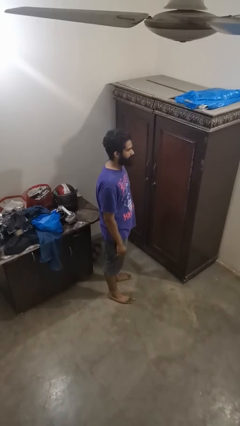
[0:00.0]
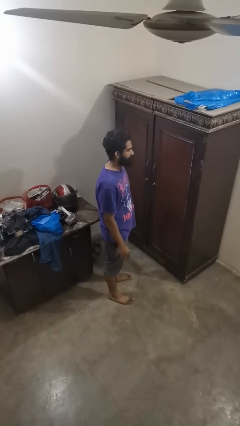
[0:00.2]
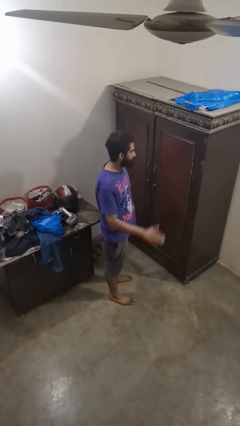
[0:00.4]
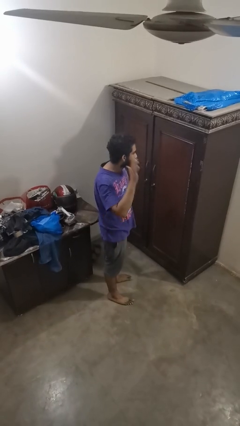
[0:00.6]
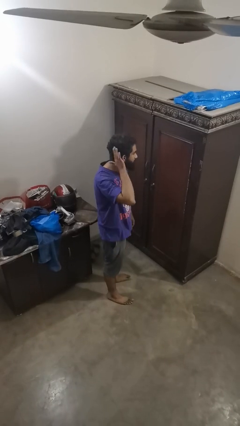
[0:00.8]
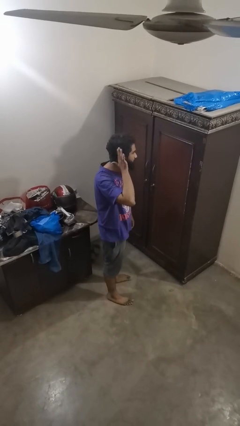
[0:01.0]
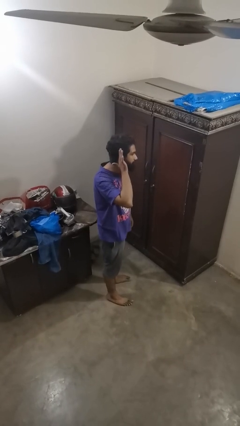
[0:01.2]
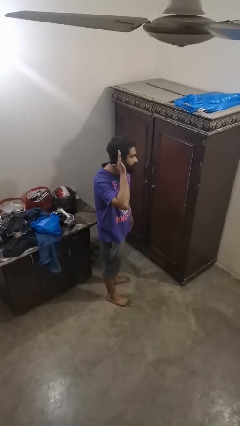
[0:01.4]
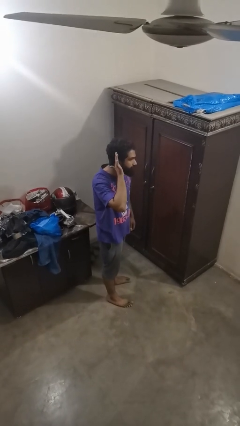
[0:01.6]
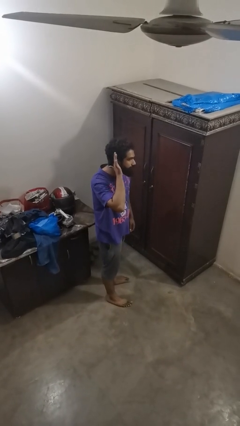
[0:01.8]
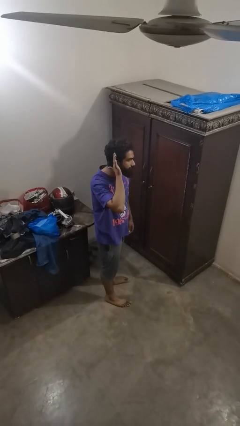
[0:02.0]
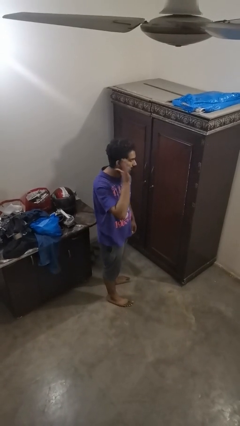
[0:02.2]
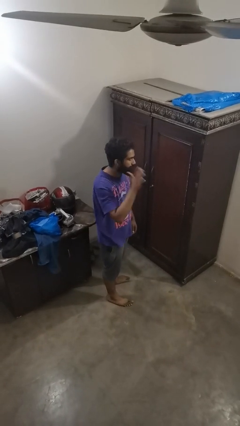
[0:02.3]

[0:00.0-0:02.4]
person gestures listen closely

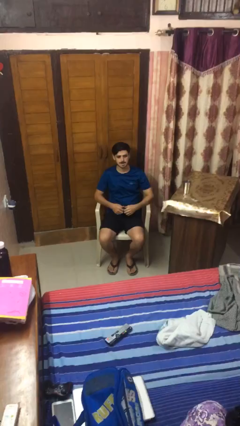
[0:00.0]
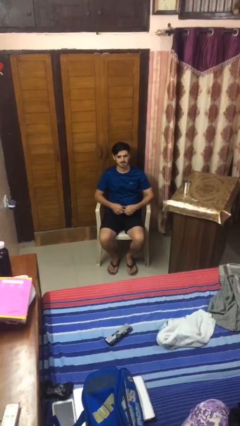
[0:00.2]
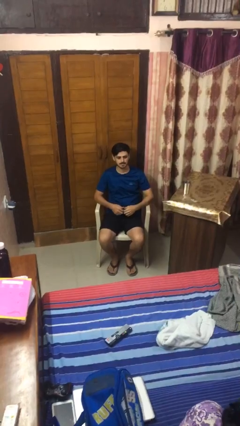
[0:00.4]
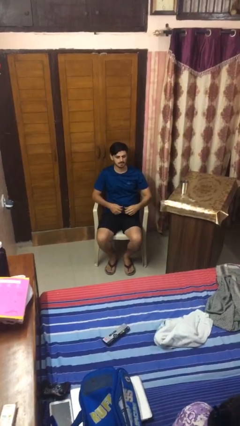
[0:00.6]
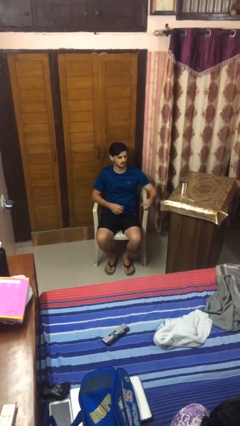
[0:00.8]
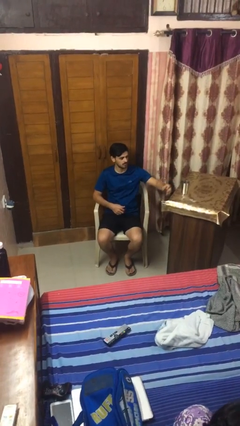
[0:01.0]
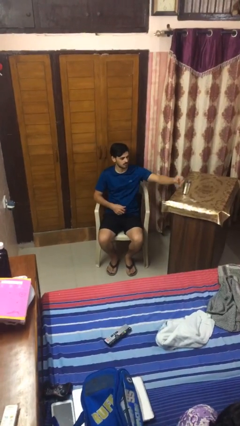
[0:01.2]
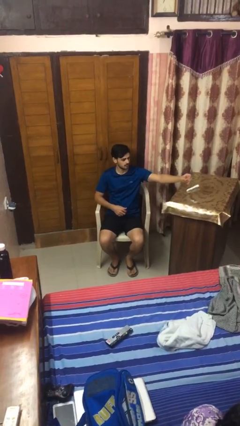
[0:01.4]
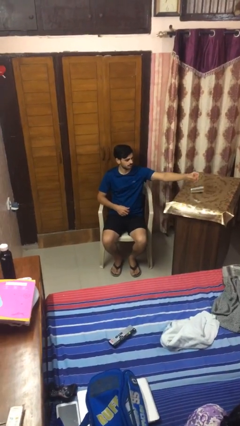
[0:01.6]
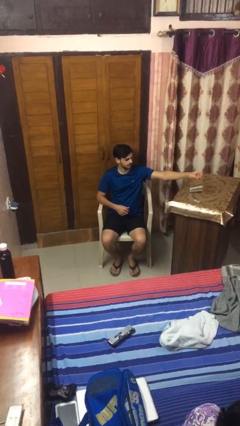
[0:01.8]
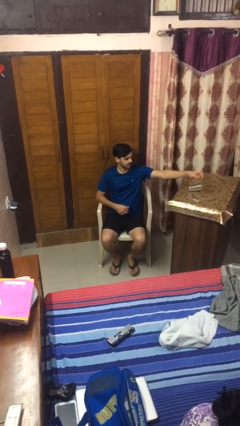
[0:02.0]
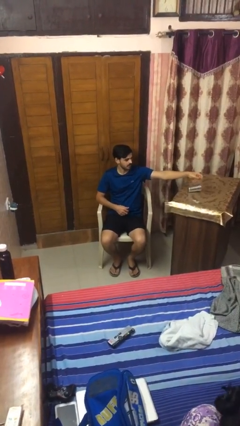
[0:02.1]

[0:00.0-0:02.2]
person knocks over glass

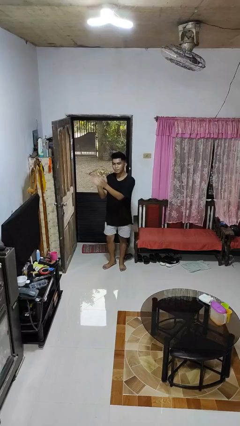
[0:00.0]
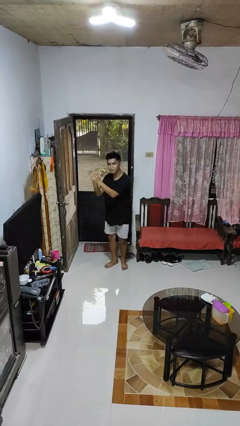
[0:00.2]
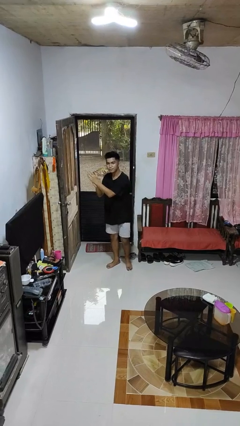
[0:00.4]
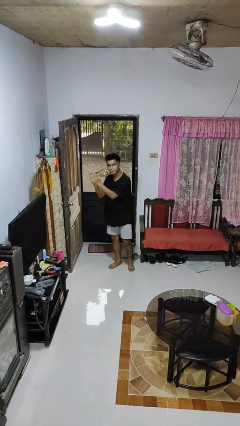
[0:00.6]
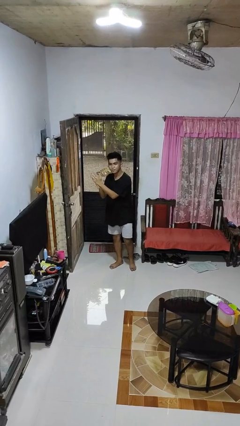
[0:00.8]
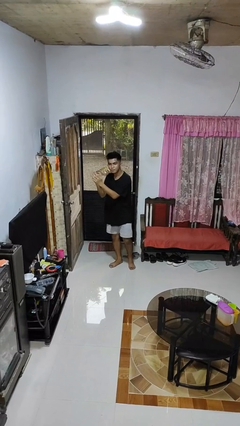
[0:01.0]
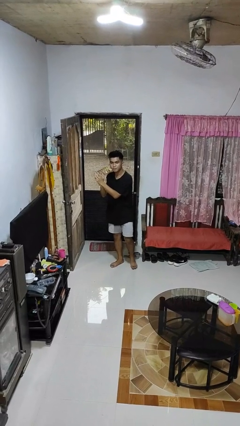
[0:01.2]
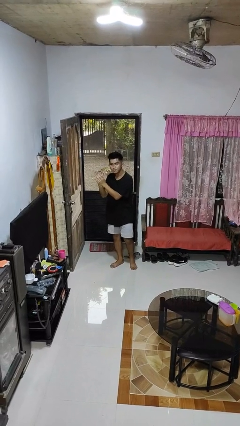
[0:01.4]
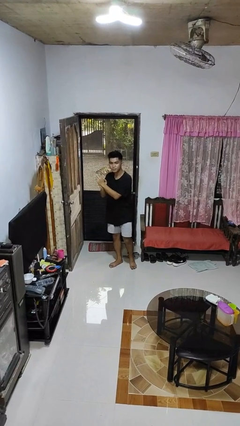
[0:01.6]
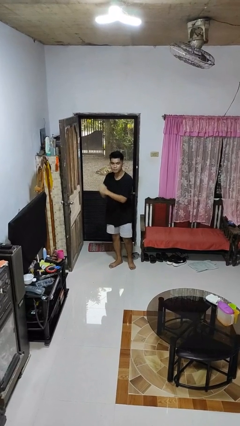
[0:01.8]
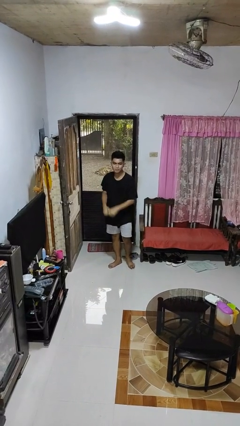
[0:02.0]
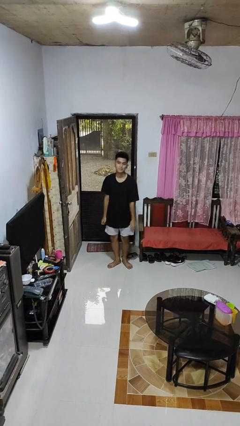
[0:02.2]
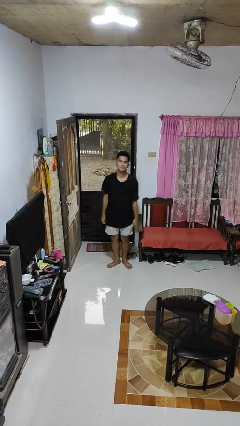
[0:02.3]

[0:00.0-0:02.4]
person claps hands

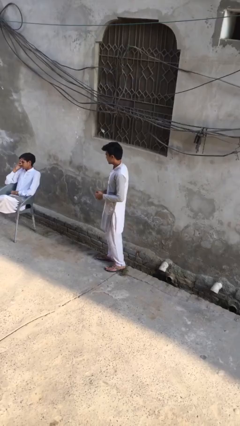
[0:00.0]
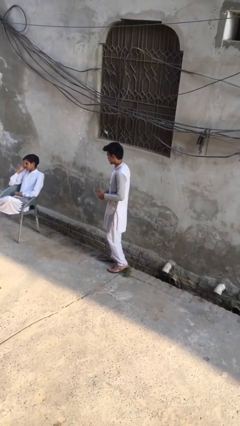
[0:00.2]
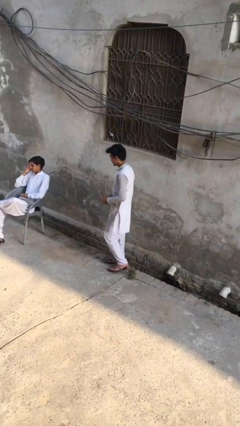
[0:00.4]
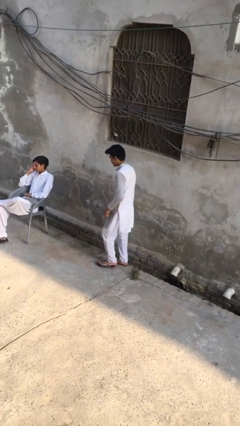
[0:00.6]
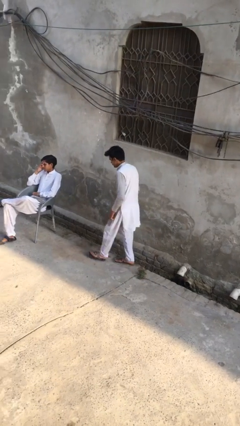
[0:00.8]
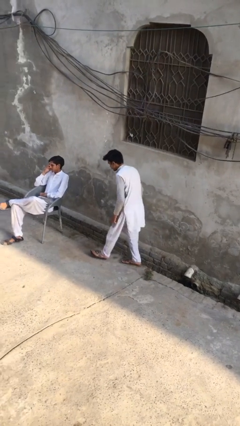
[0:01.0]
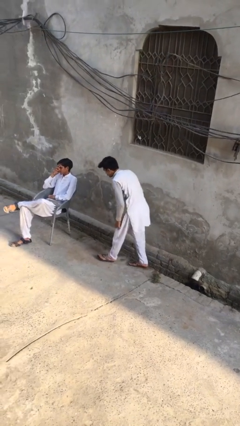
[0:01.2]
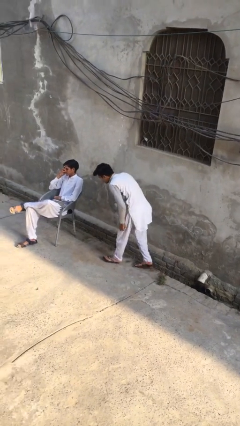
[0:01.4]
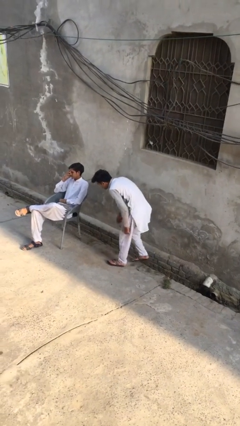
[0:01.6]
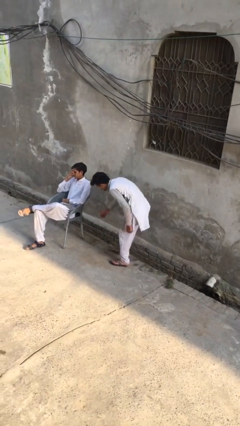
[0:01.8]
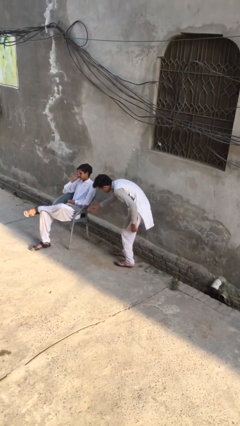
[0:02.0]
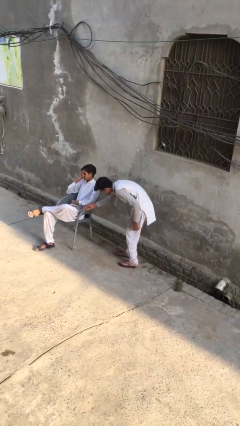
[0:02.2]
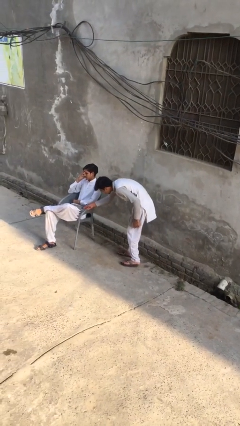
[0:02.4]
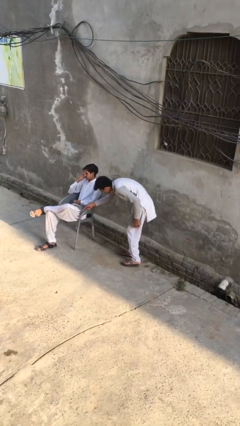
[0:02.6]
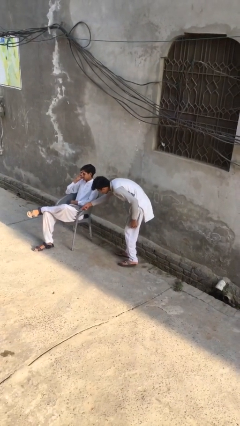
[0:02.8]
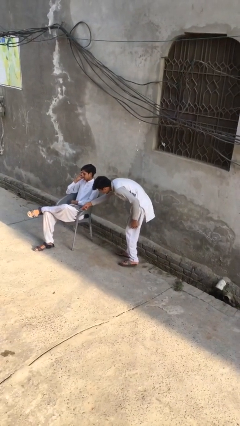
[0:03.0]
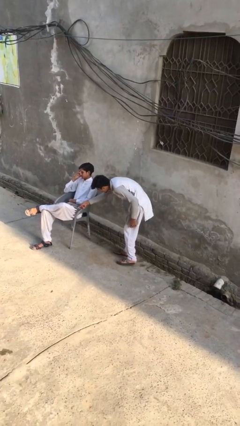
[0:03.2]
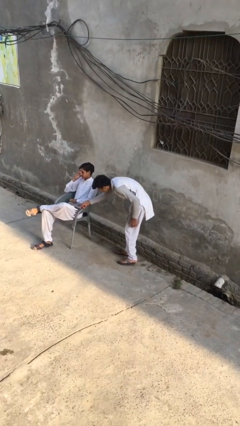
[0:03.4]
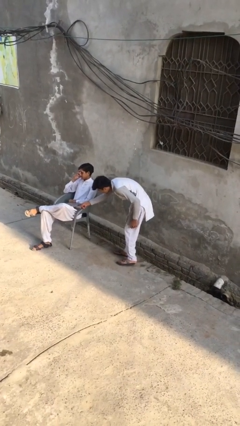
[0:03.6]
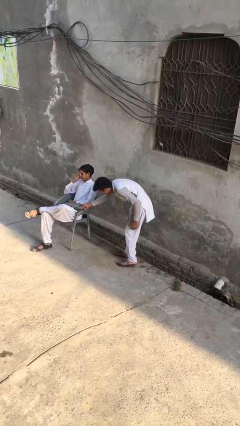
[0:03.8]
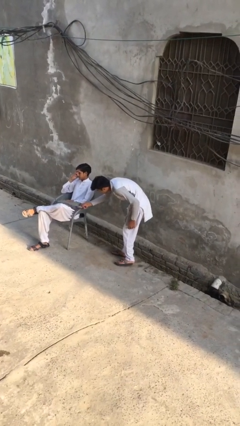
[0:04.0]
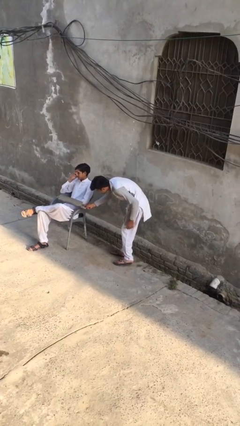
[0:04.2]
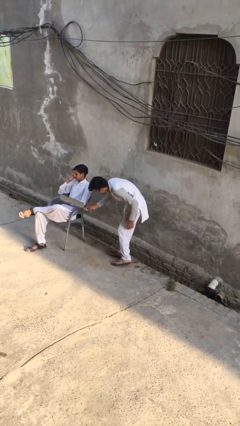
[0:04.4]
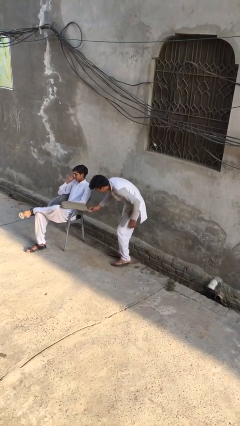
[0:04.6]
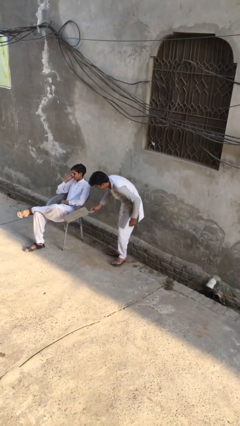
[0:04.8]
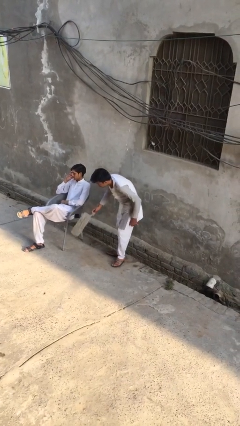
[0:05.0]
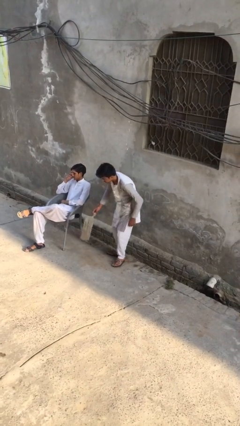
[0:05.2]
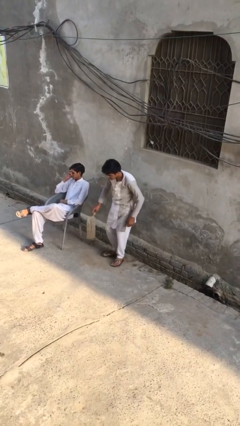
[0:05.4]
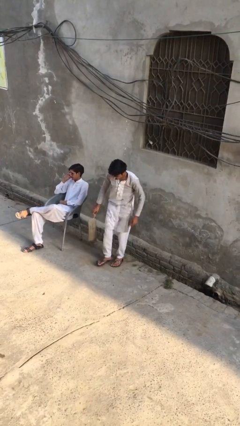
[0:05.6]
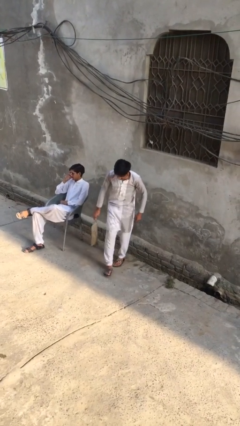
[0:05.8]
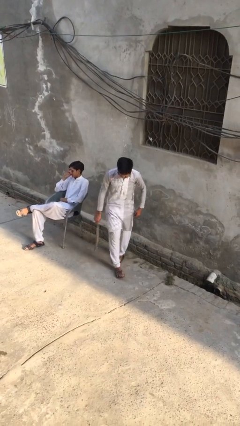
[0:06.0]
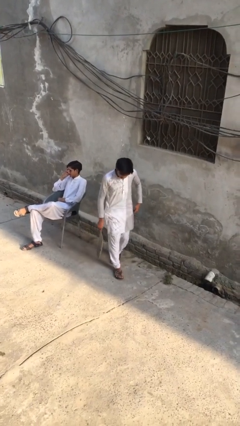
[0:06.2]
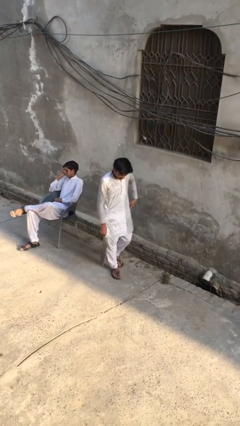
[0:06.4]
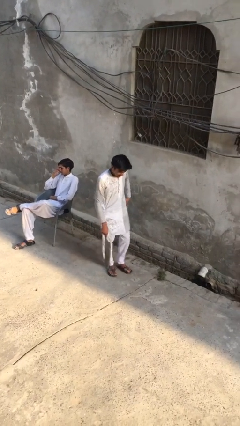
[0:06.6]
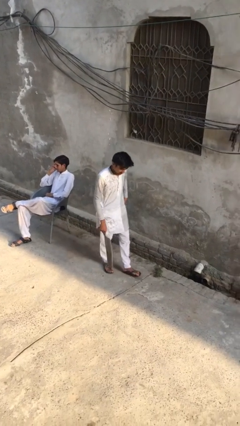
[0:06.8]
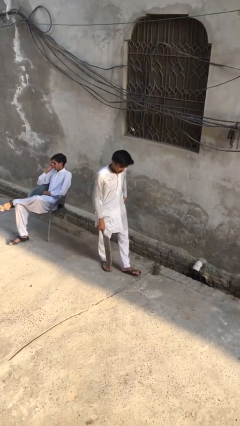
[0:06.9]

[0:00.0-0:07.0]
person steals object from person

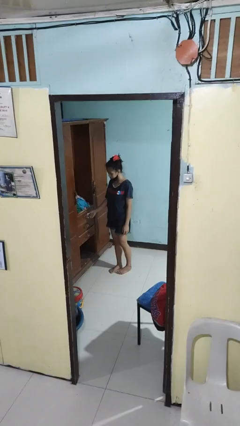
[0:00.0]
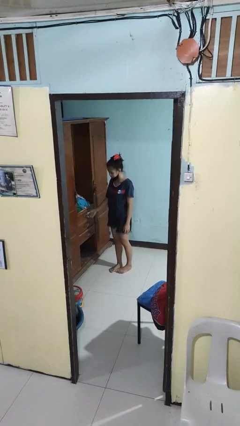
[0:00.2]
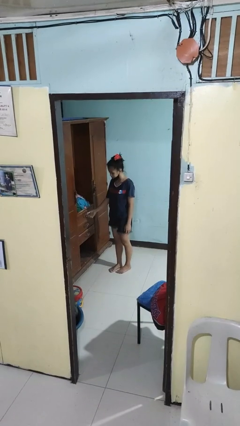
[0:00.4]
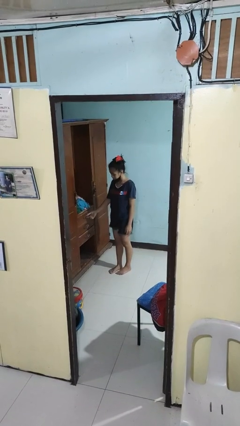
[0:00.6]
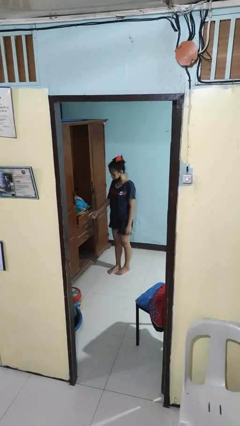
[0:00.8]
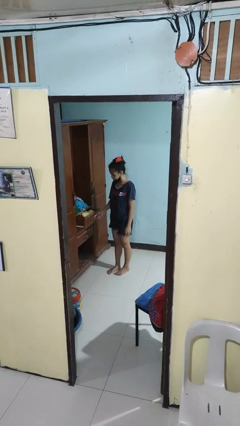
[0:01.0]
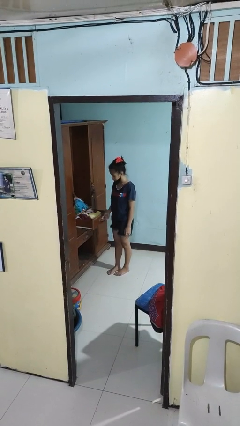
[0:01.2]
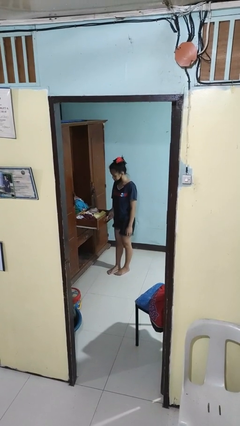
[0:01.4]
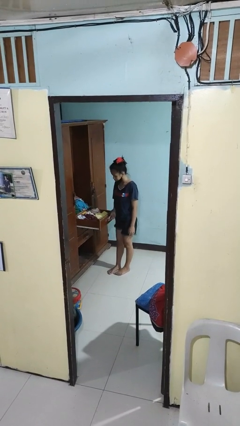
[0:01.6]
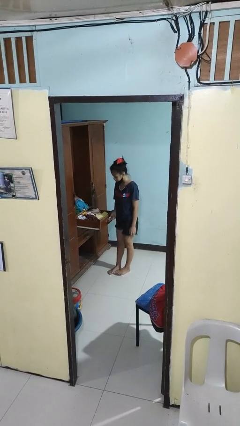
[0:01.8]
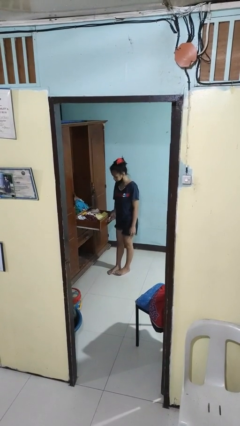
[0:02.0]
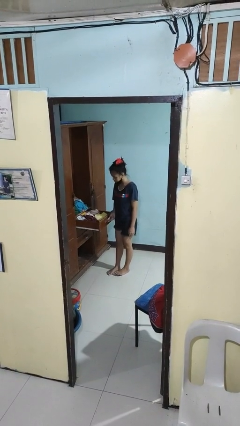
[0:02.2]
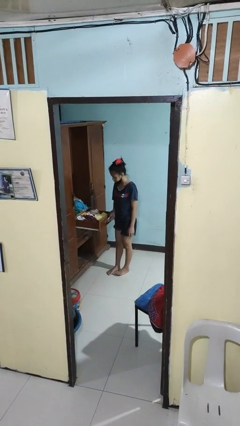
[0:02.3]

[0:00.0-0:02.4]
person opens dresser drawer

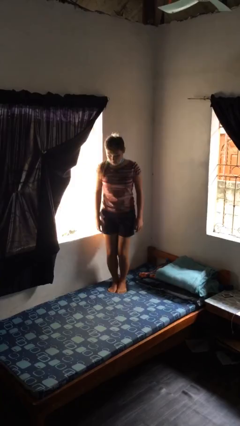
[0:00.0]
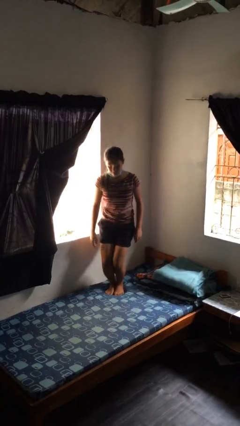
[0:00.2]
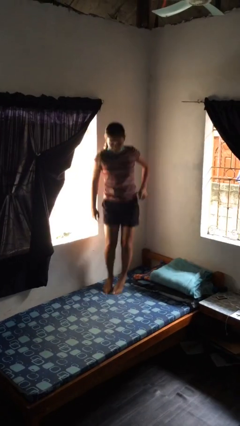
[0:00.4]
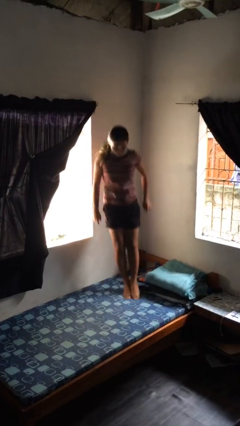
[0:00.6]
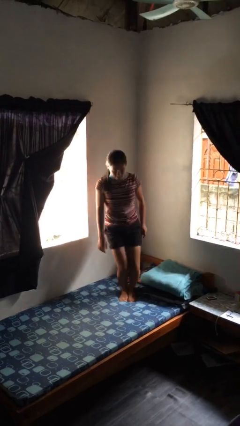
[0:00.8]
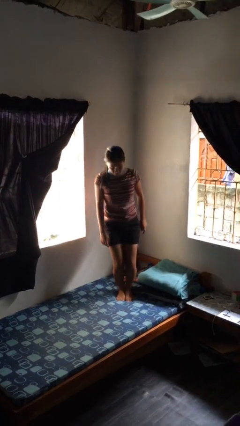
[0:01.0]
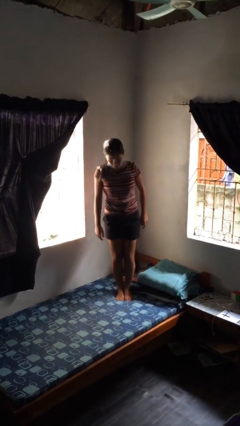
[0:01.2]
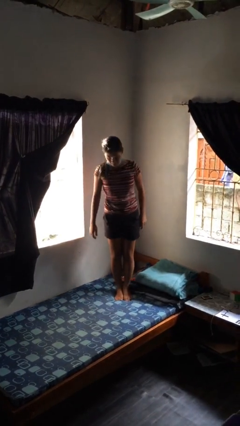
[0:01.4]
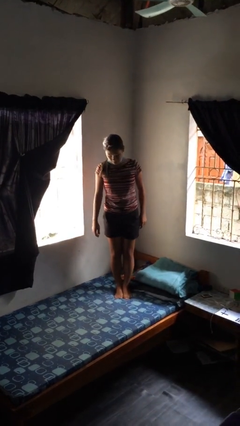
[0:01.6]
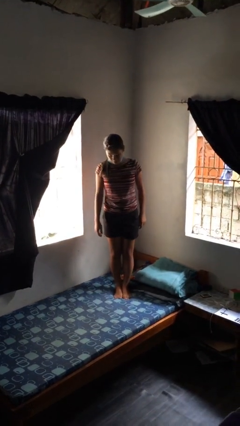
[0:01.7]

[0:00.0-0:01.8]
person jumps on bed
